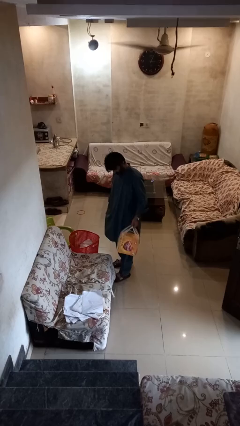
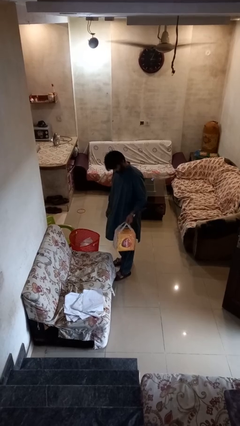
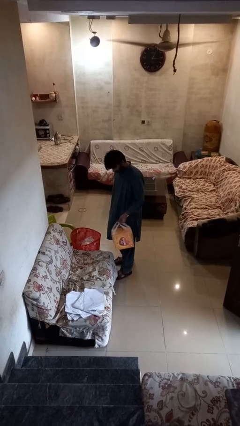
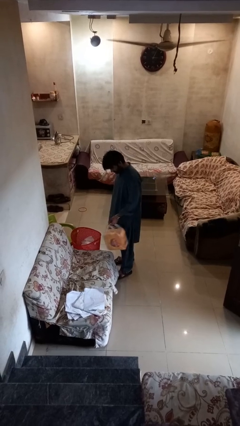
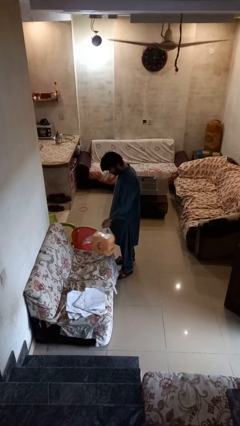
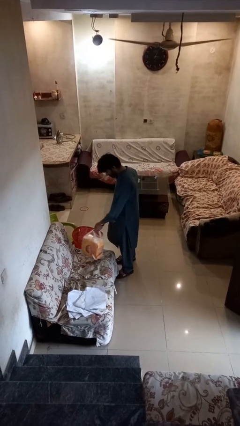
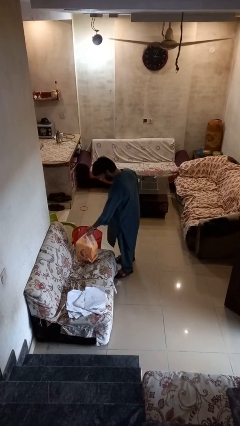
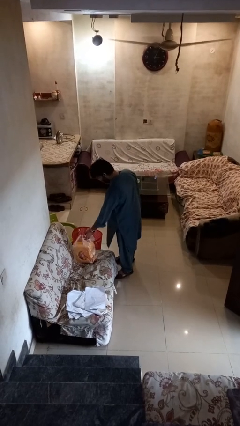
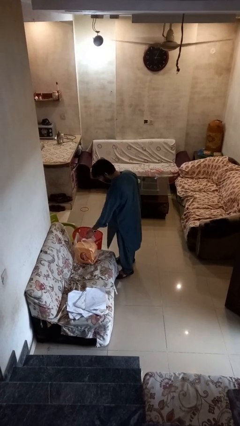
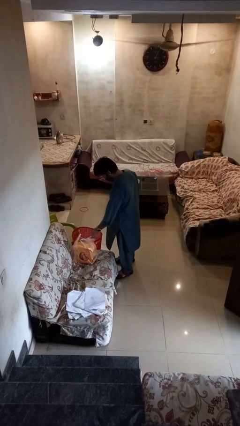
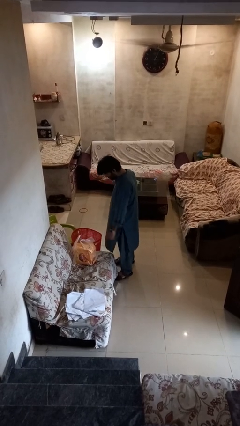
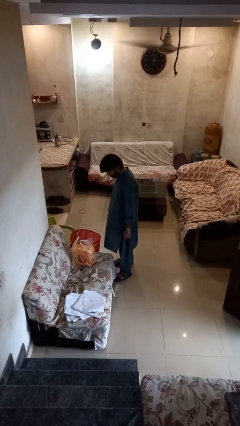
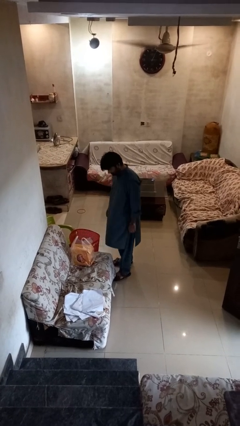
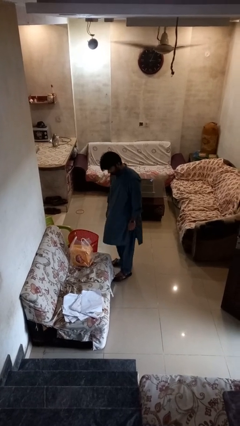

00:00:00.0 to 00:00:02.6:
person puts down object on couch

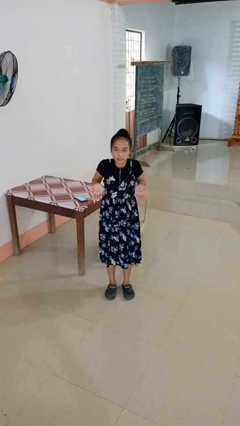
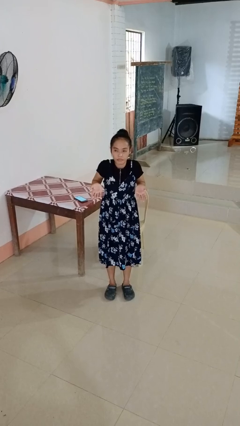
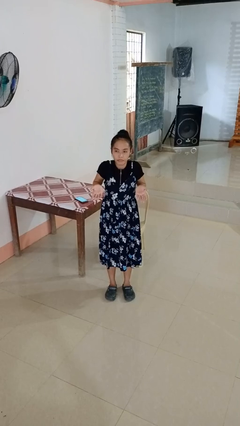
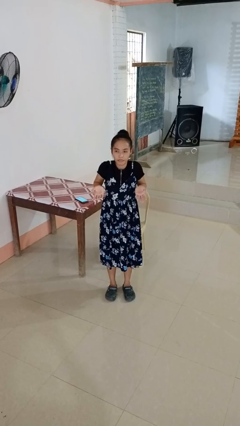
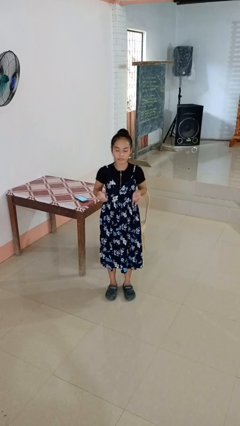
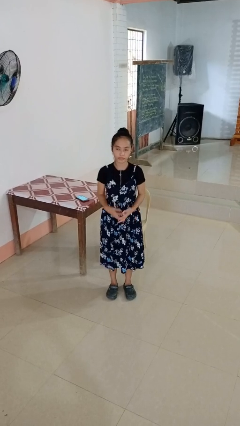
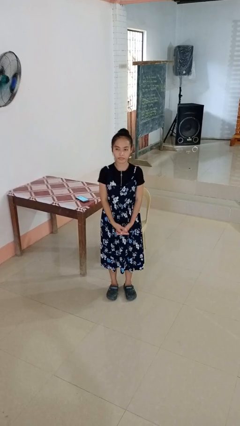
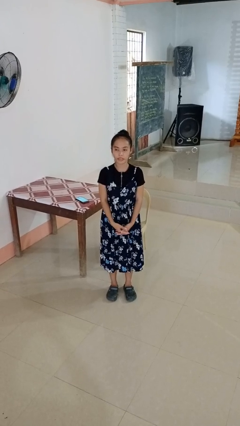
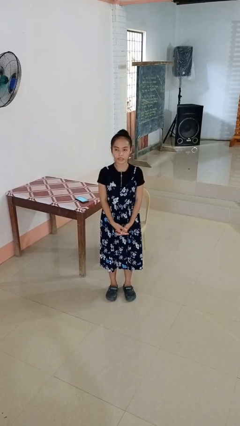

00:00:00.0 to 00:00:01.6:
person shrugs

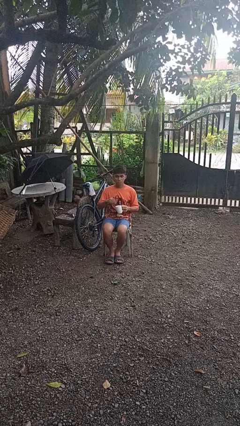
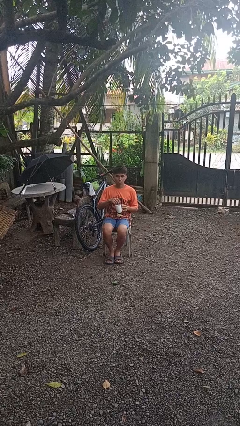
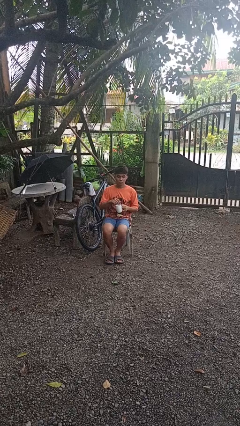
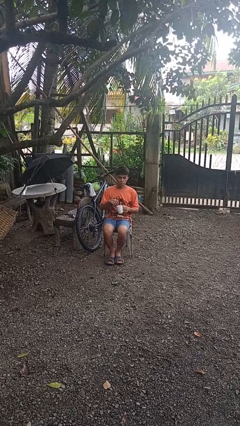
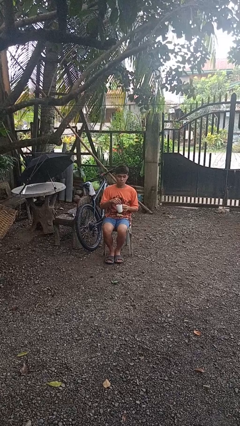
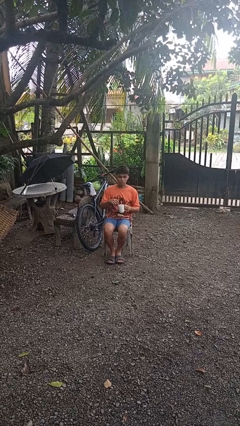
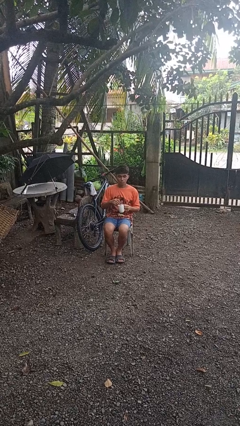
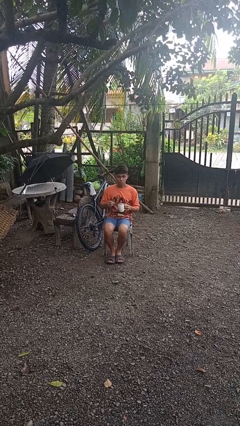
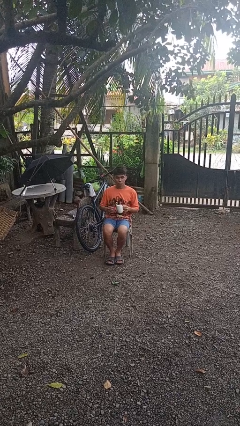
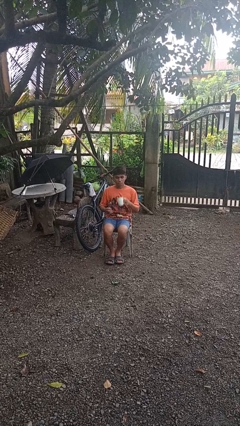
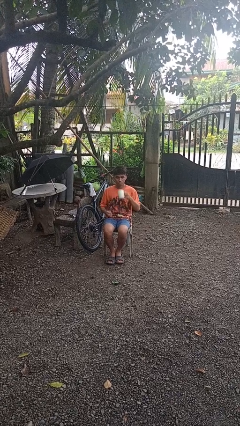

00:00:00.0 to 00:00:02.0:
person stirs mug

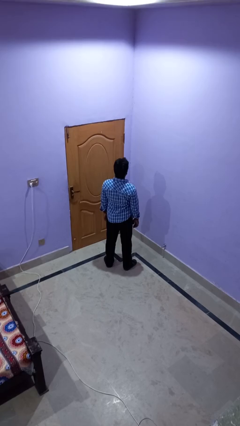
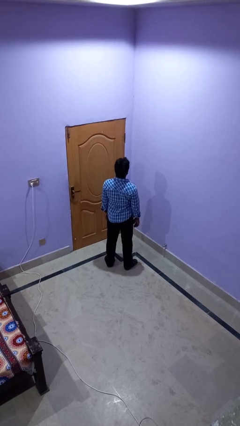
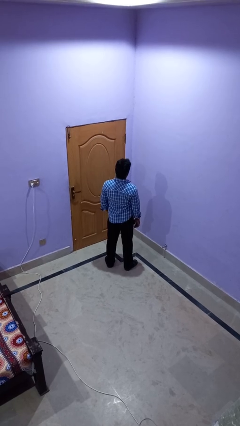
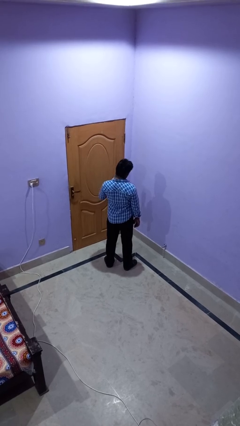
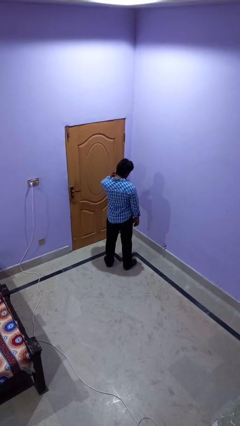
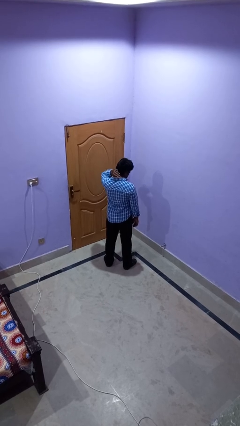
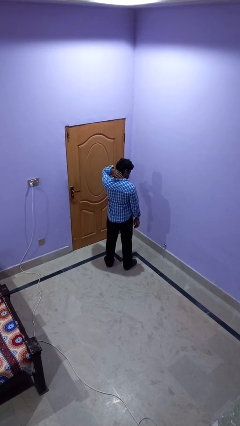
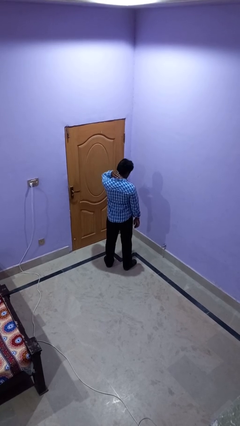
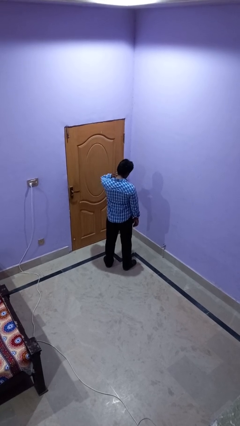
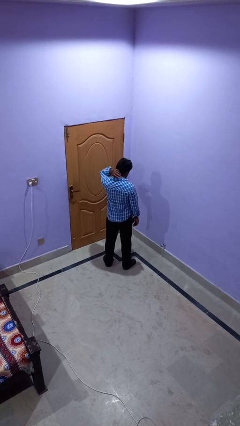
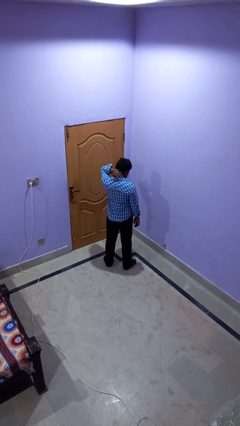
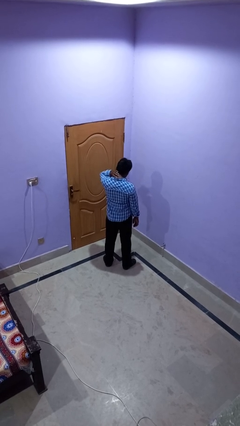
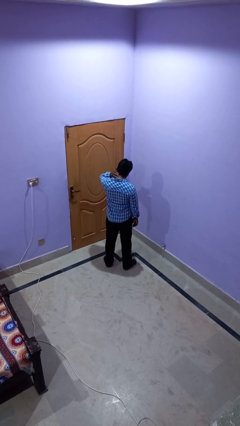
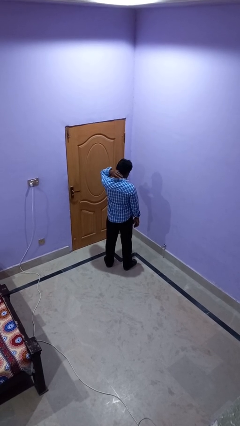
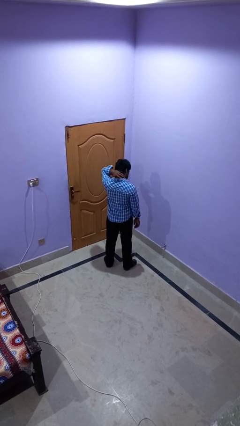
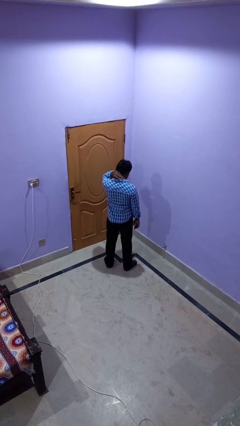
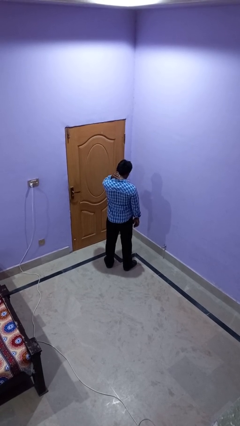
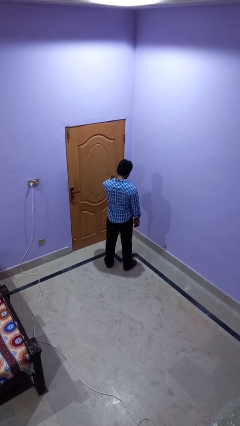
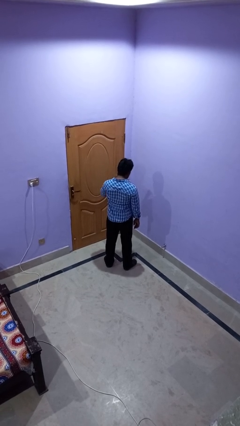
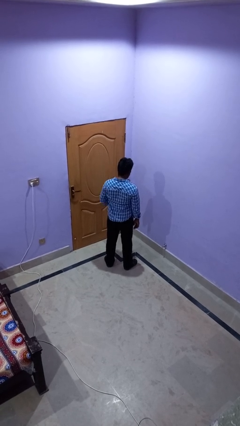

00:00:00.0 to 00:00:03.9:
person rubs neck

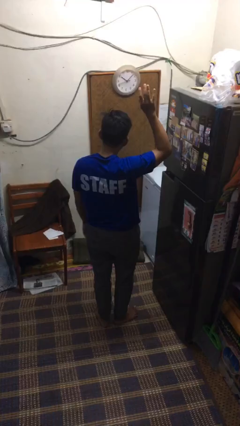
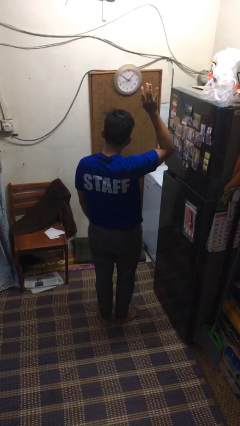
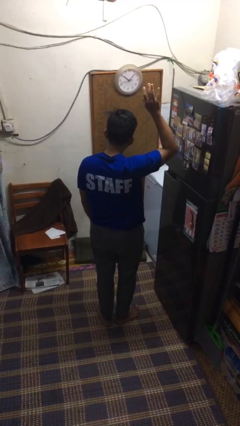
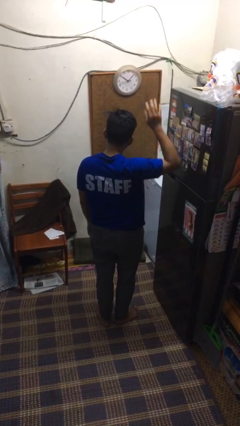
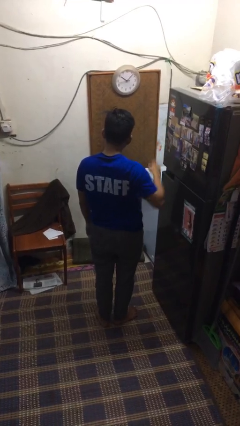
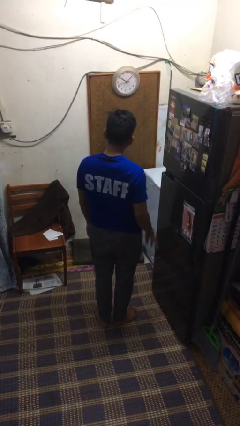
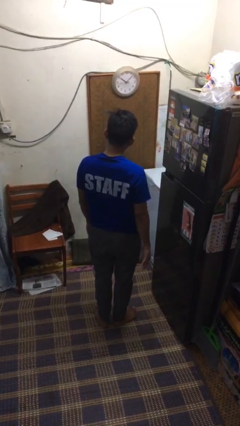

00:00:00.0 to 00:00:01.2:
person gestures lower hand

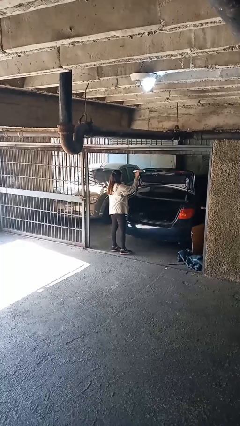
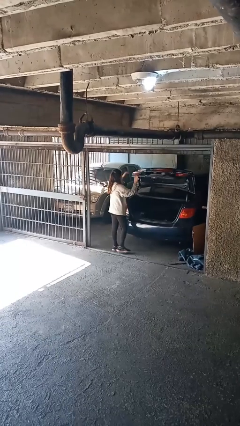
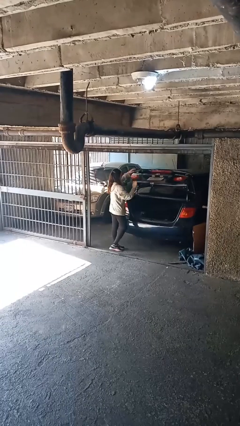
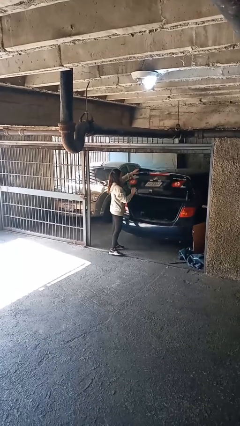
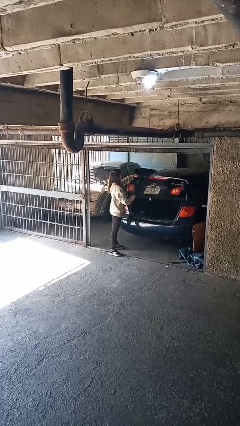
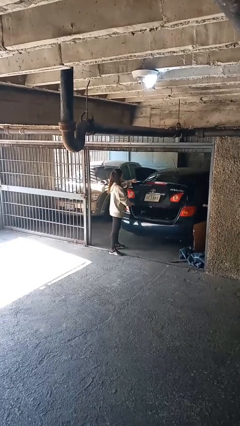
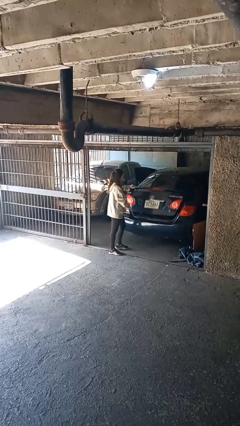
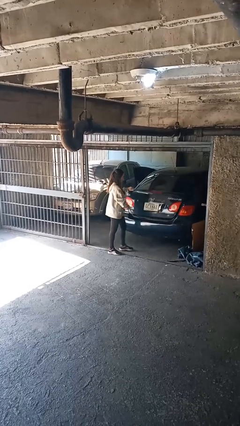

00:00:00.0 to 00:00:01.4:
person closes car trunk

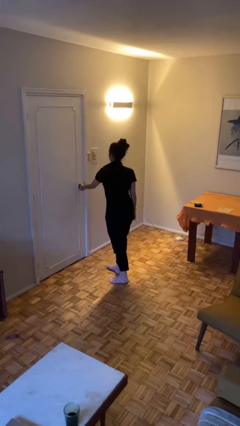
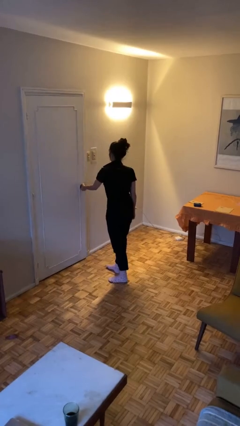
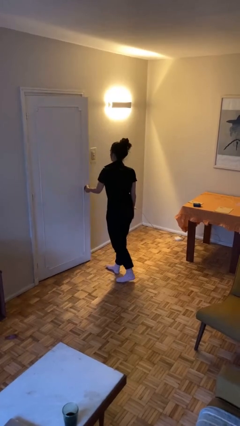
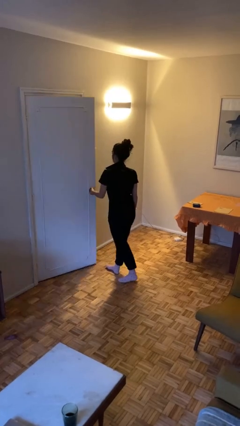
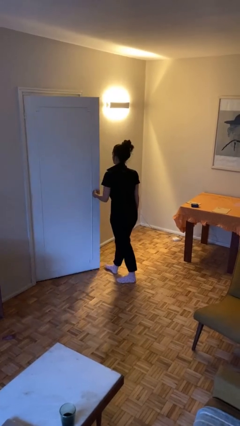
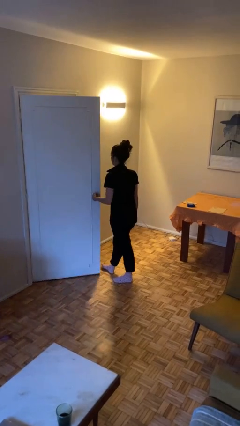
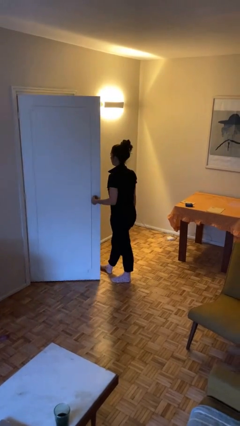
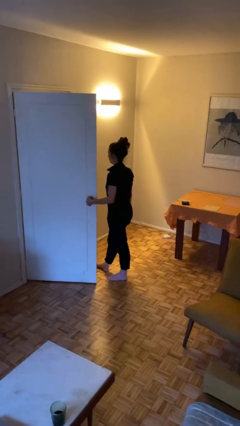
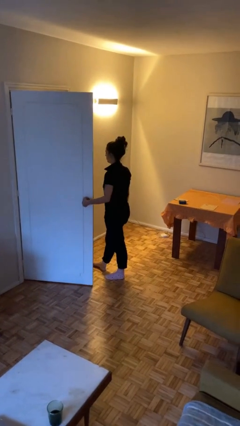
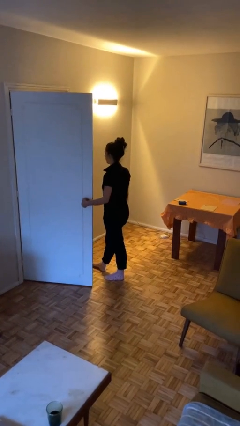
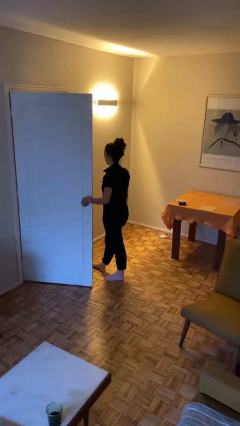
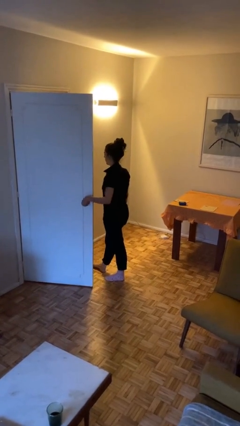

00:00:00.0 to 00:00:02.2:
person opens facility door

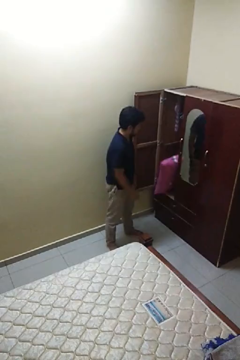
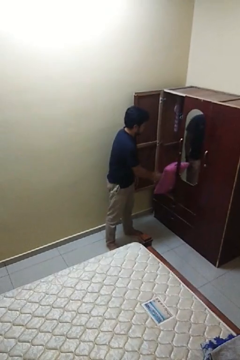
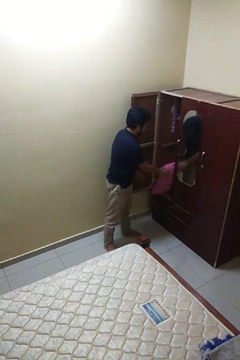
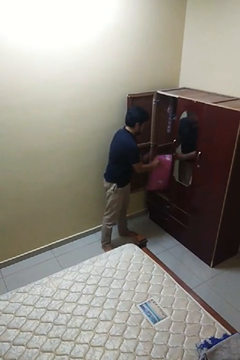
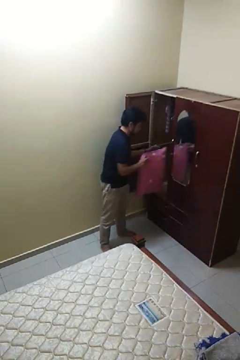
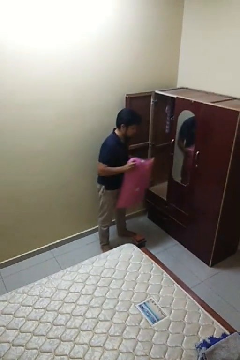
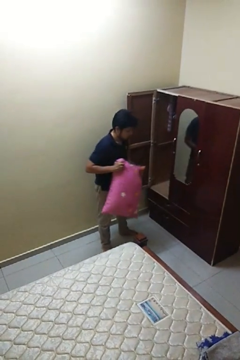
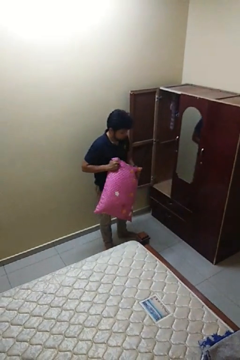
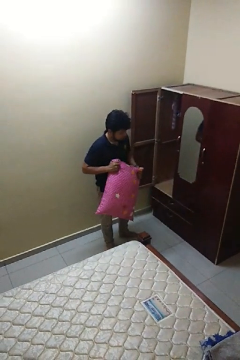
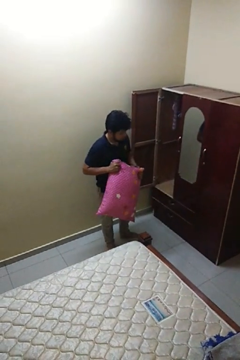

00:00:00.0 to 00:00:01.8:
person picks up object from cabinet

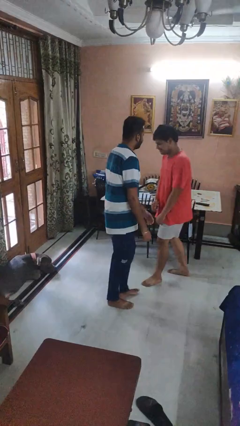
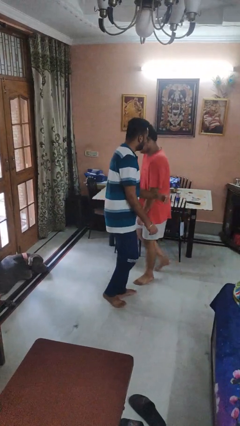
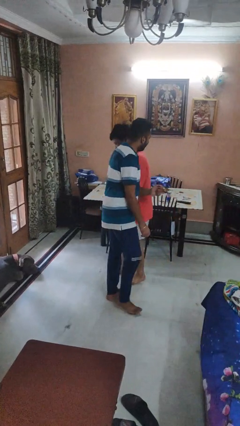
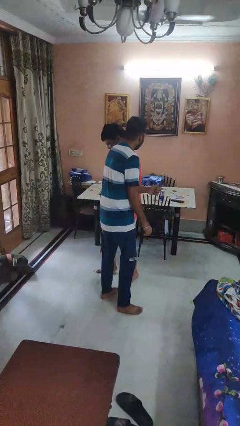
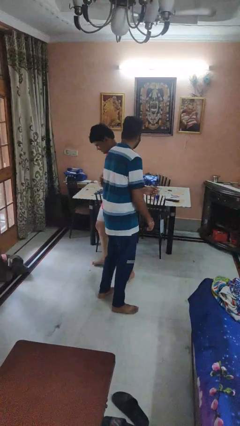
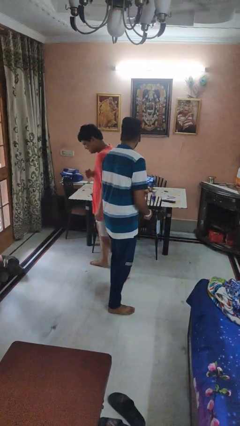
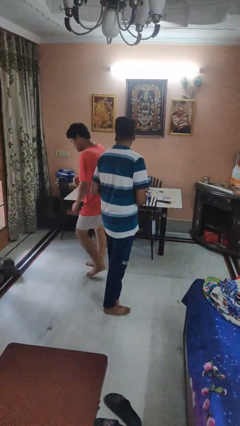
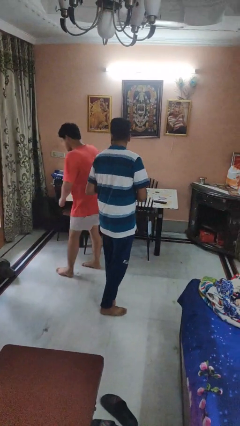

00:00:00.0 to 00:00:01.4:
person bumps into person
